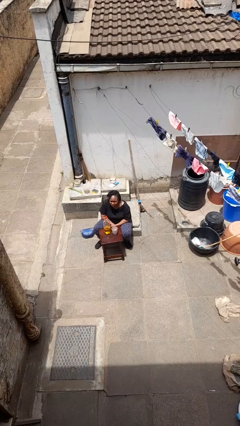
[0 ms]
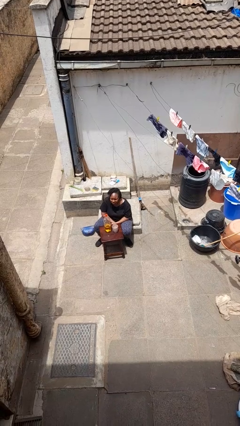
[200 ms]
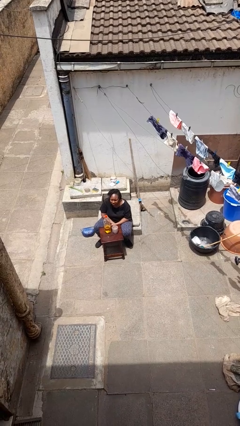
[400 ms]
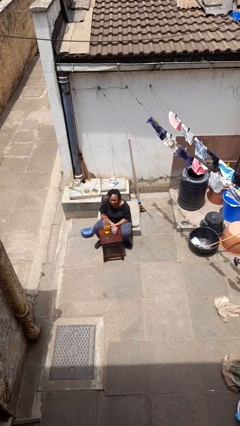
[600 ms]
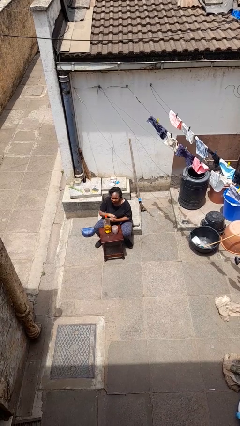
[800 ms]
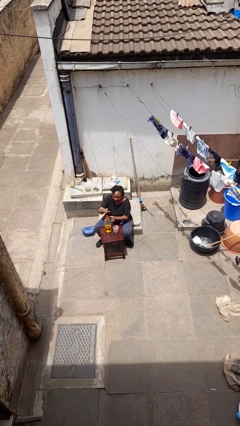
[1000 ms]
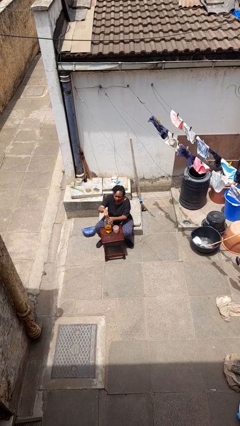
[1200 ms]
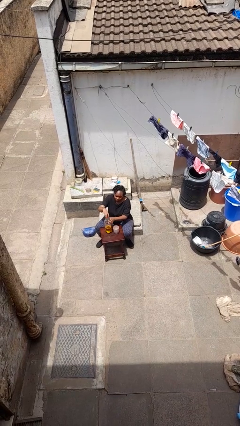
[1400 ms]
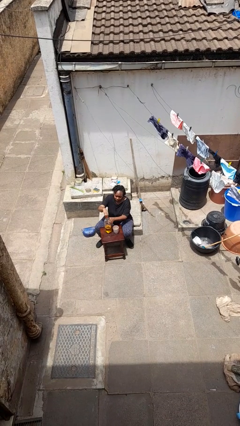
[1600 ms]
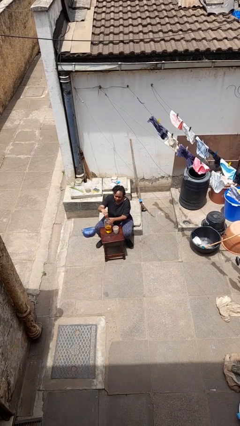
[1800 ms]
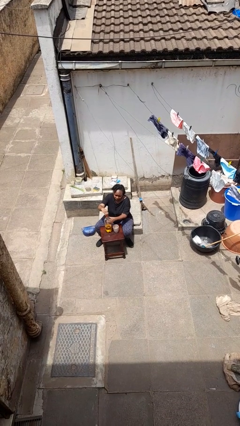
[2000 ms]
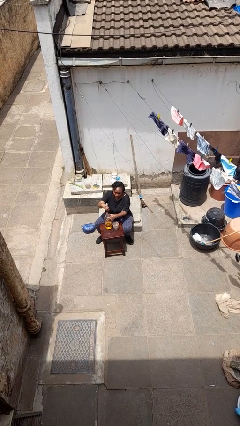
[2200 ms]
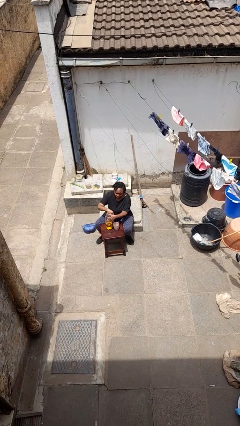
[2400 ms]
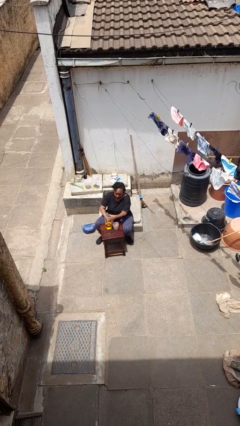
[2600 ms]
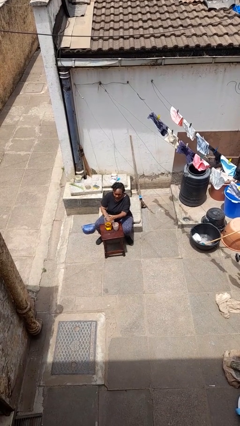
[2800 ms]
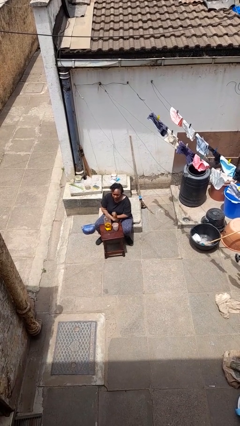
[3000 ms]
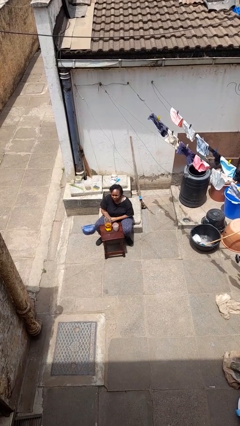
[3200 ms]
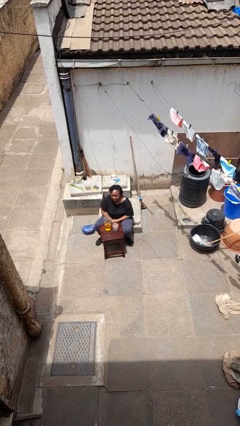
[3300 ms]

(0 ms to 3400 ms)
person unscrews lid from bottle

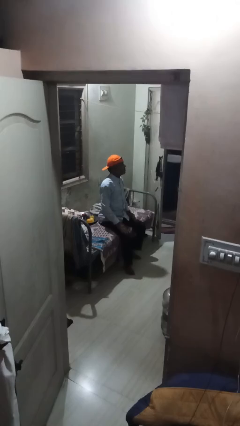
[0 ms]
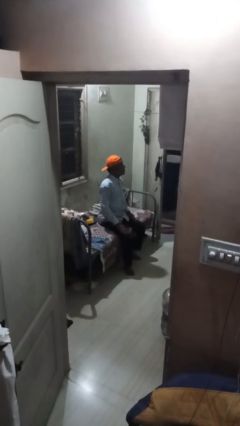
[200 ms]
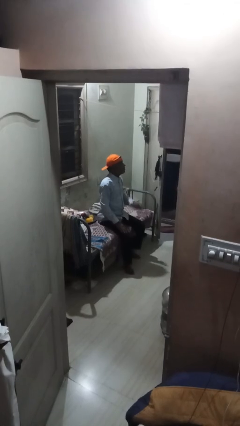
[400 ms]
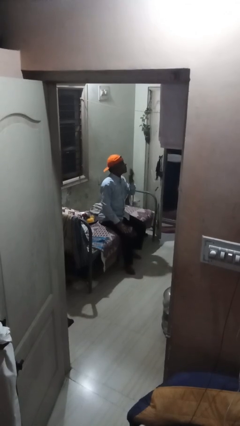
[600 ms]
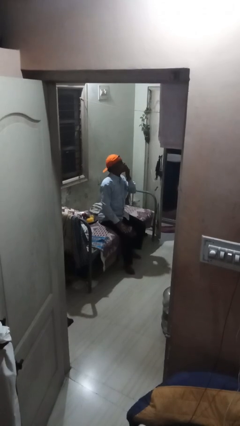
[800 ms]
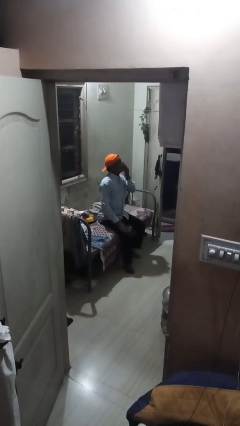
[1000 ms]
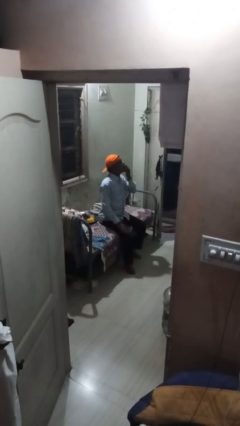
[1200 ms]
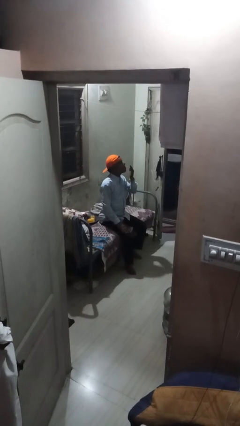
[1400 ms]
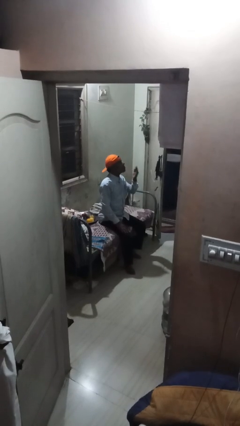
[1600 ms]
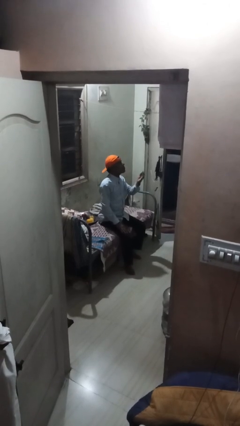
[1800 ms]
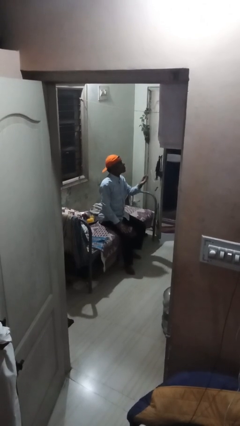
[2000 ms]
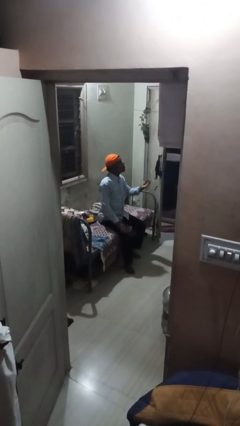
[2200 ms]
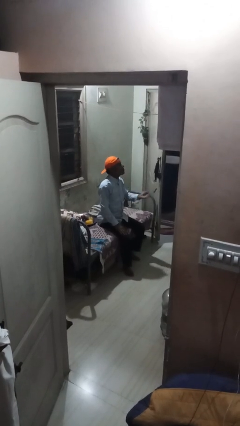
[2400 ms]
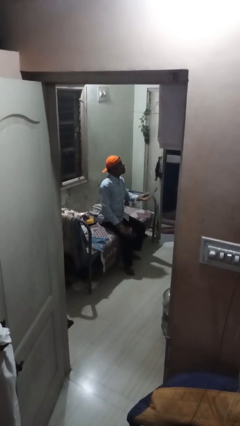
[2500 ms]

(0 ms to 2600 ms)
person gestures blow kiss

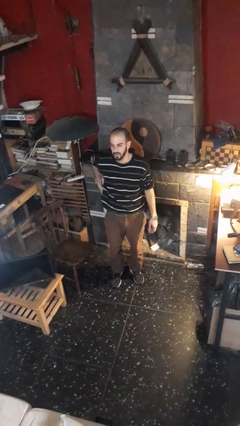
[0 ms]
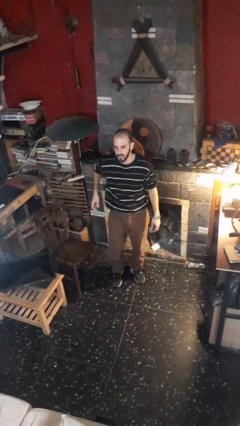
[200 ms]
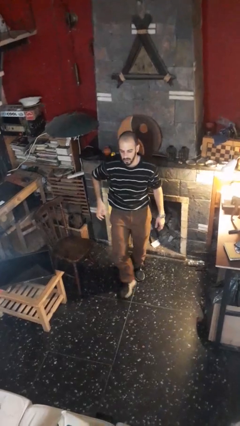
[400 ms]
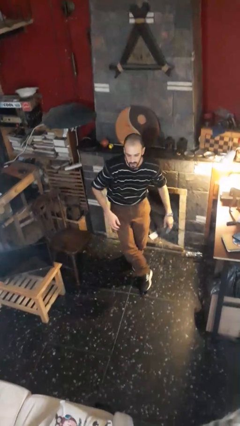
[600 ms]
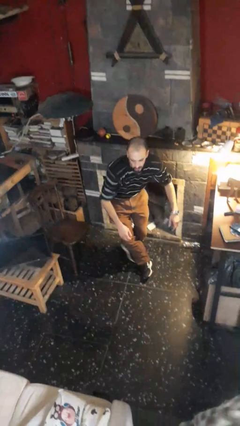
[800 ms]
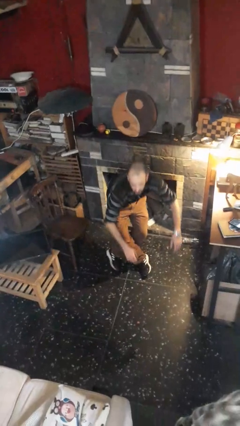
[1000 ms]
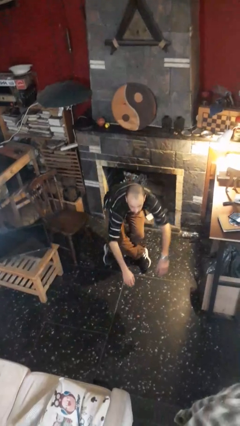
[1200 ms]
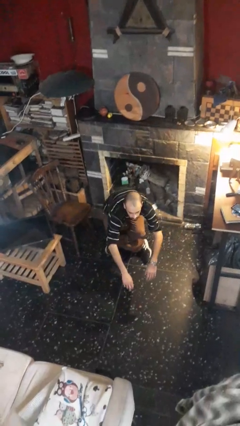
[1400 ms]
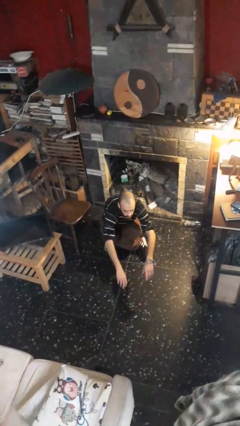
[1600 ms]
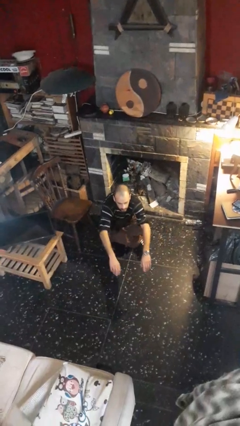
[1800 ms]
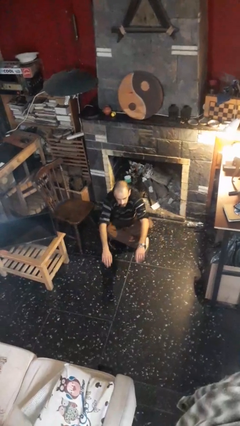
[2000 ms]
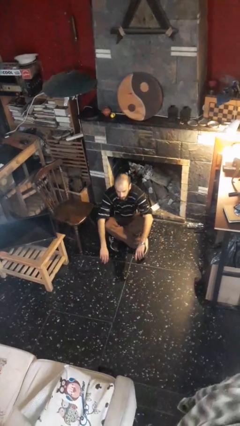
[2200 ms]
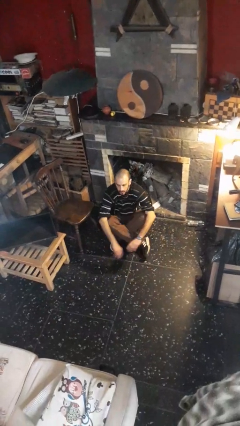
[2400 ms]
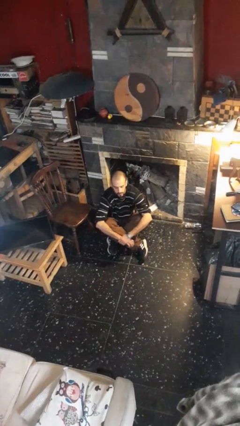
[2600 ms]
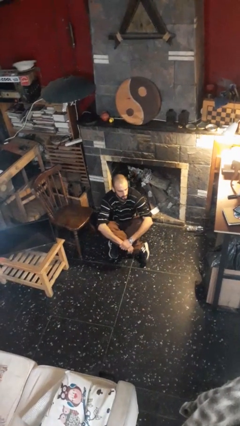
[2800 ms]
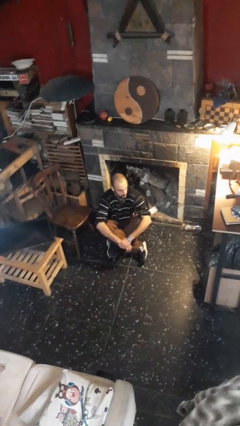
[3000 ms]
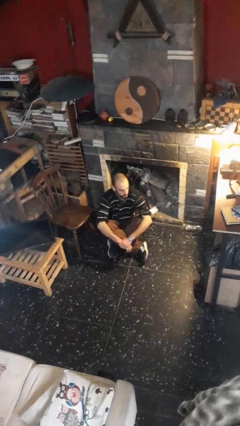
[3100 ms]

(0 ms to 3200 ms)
person sits crisscross

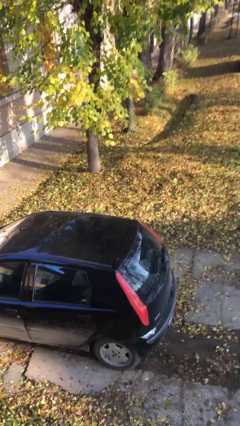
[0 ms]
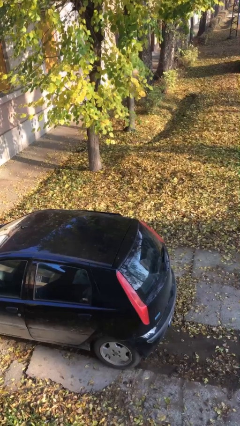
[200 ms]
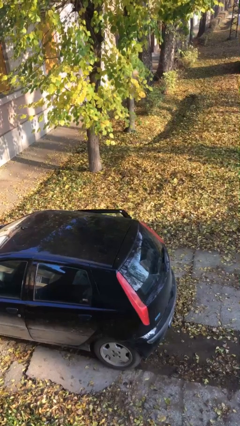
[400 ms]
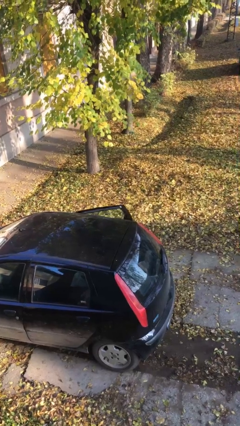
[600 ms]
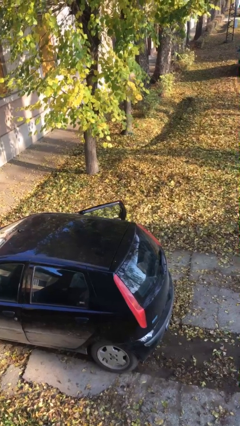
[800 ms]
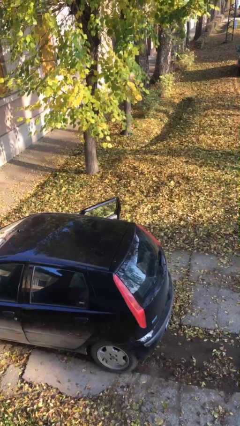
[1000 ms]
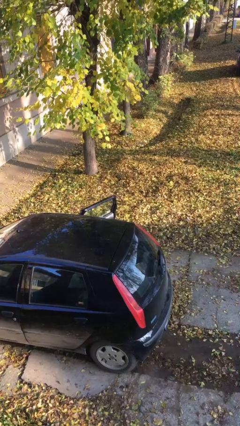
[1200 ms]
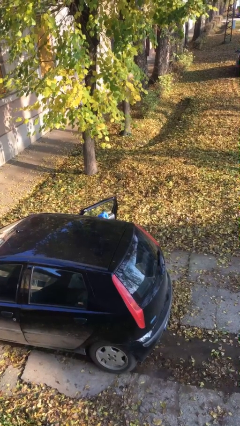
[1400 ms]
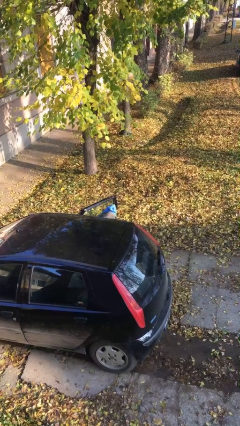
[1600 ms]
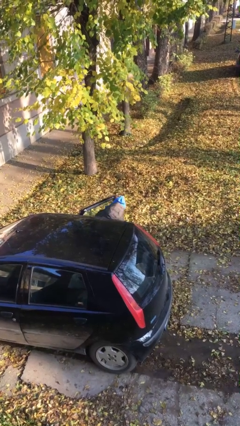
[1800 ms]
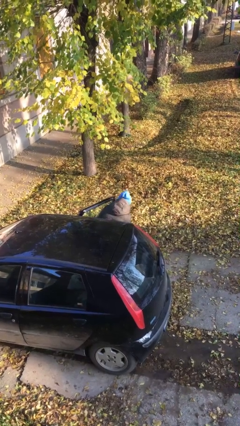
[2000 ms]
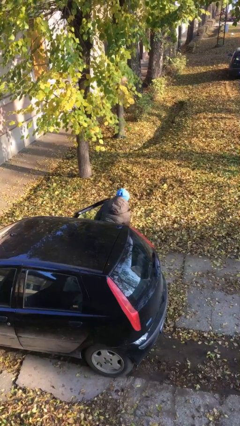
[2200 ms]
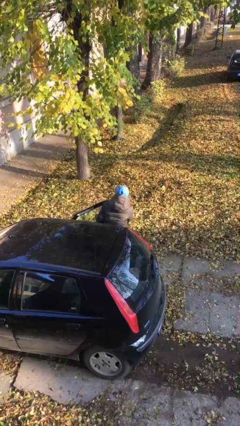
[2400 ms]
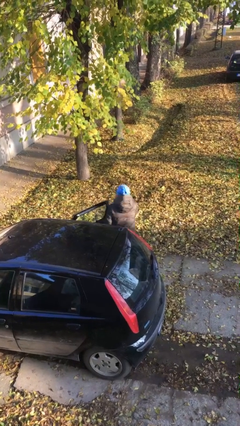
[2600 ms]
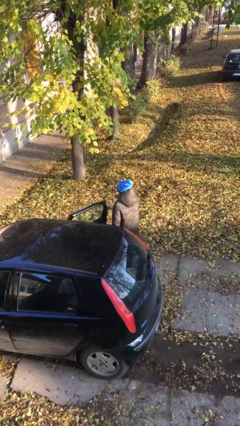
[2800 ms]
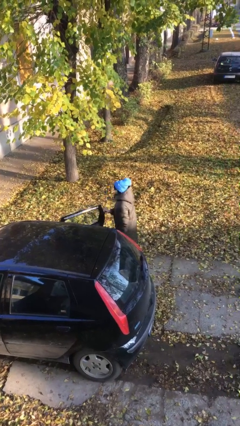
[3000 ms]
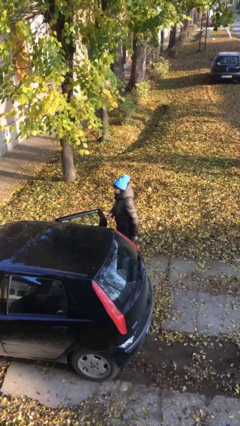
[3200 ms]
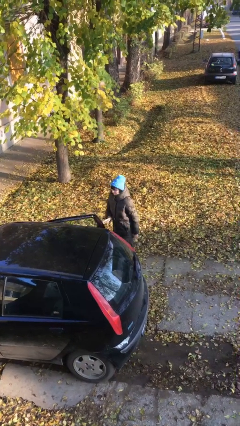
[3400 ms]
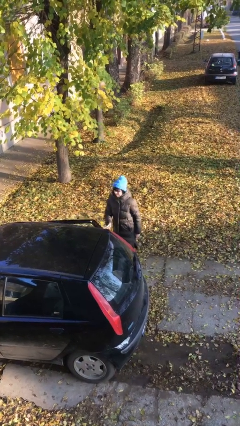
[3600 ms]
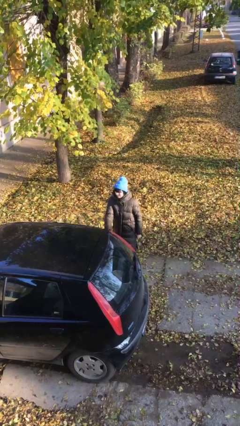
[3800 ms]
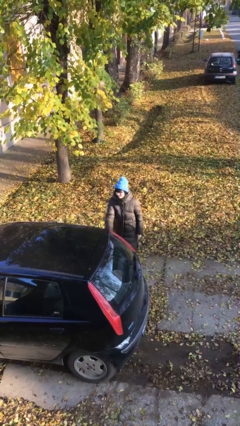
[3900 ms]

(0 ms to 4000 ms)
person exits car

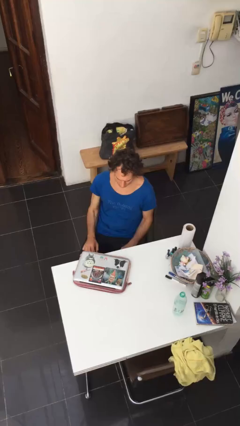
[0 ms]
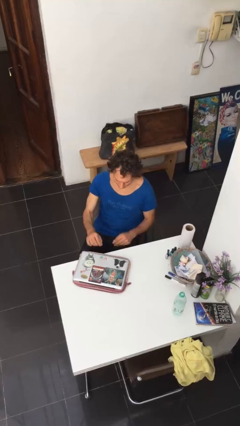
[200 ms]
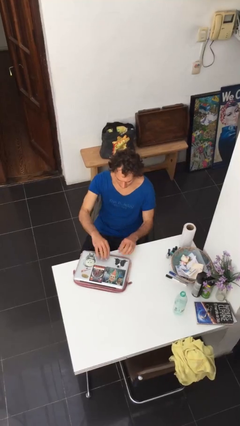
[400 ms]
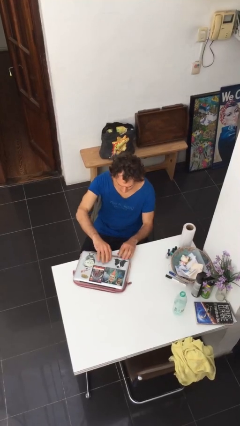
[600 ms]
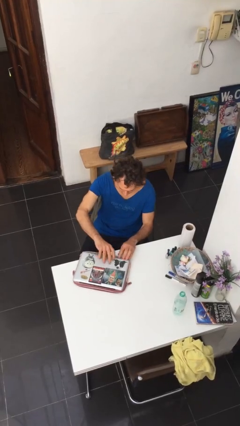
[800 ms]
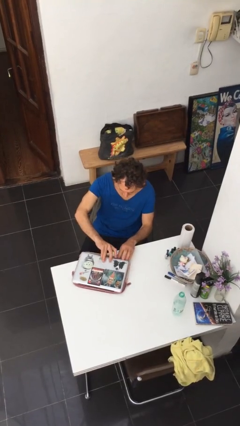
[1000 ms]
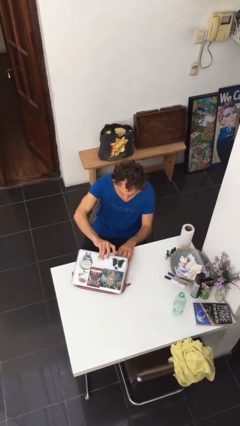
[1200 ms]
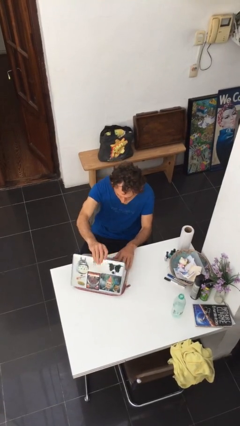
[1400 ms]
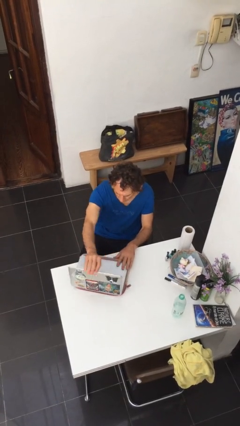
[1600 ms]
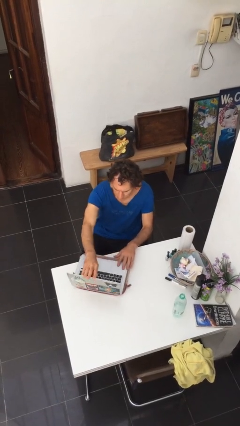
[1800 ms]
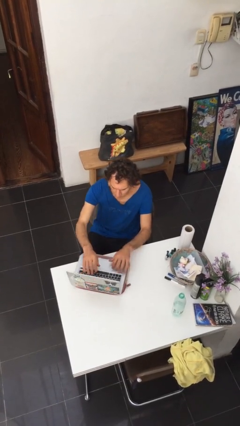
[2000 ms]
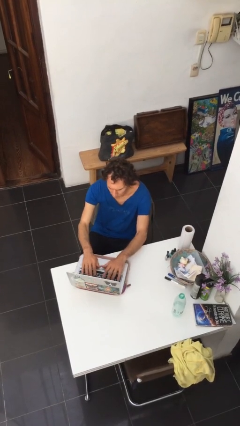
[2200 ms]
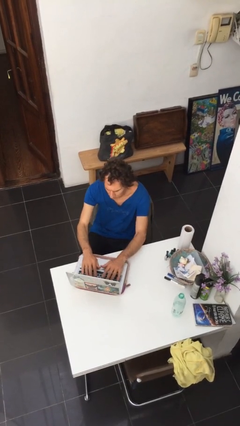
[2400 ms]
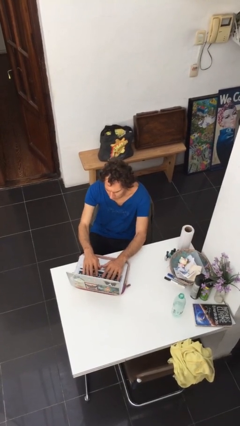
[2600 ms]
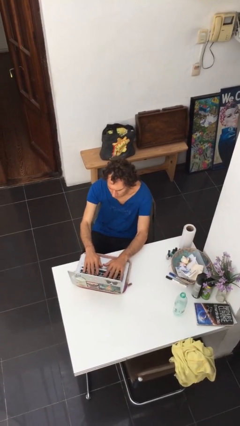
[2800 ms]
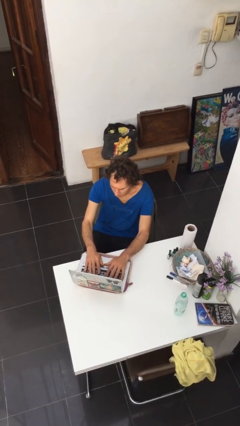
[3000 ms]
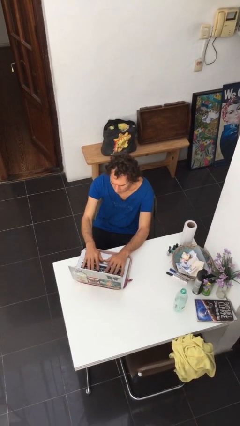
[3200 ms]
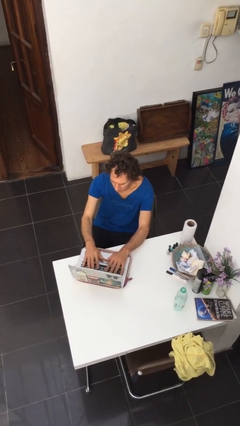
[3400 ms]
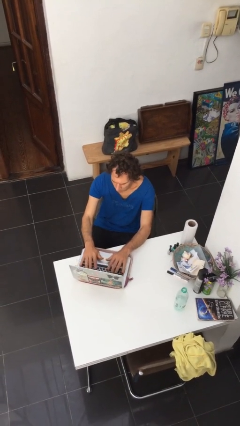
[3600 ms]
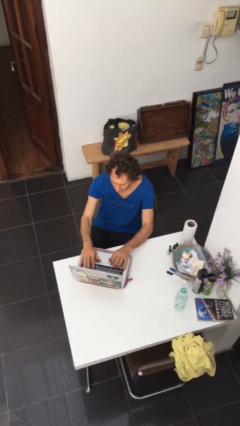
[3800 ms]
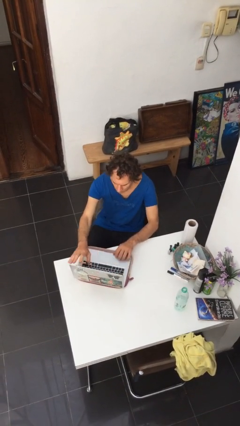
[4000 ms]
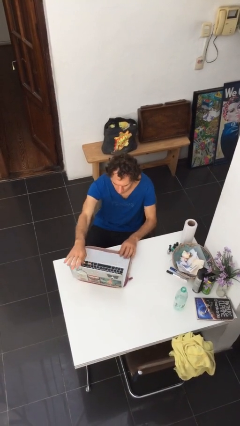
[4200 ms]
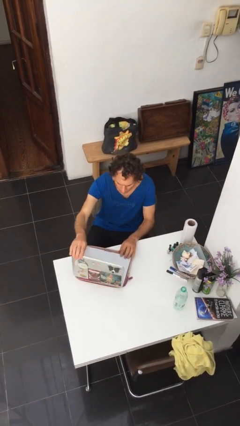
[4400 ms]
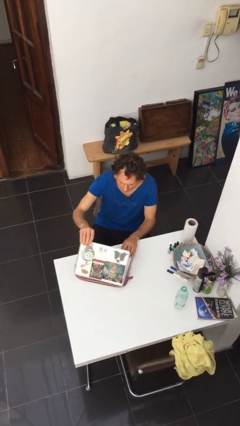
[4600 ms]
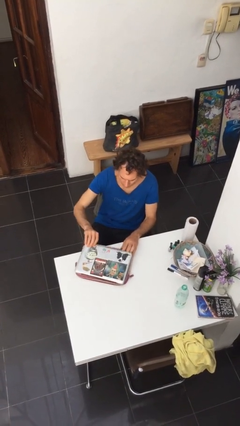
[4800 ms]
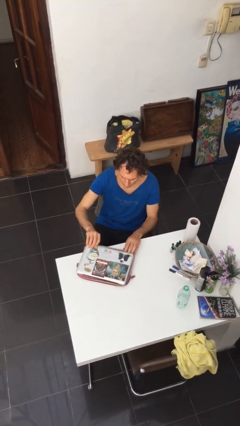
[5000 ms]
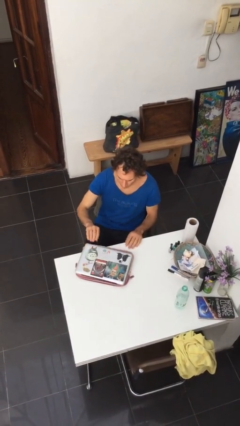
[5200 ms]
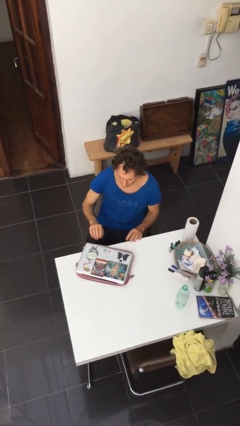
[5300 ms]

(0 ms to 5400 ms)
person interacts with laptop
